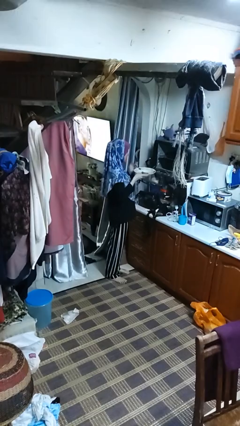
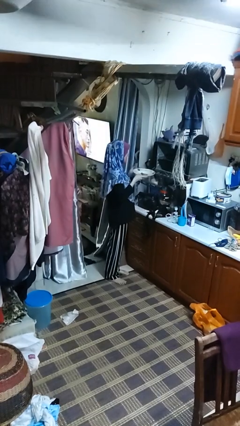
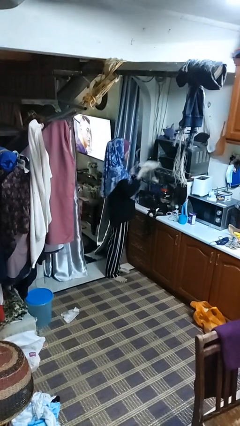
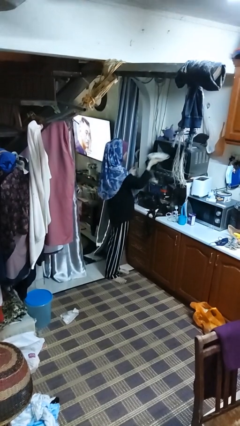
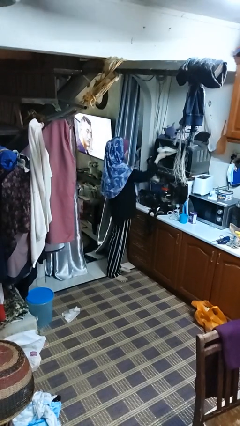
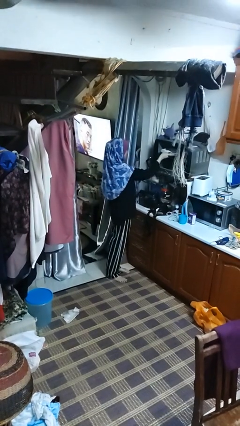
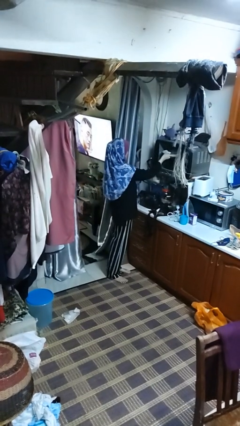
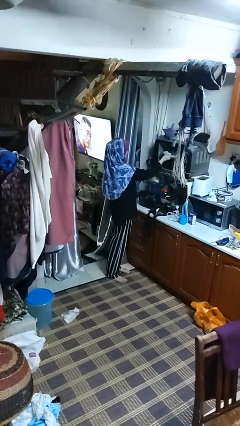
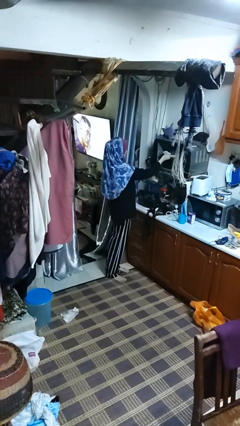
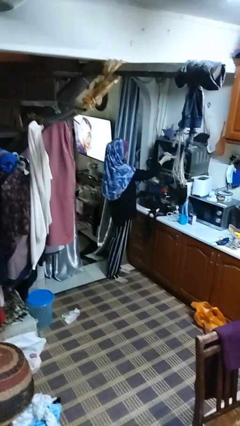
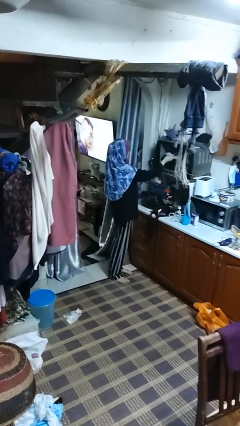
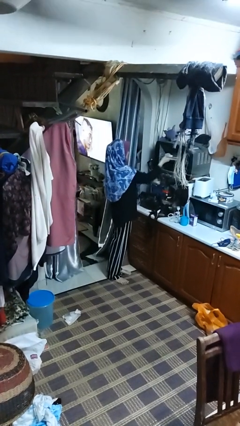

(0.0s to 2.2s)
person puts object into oven

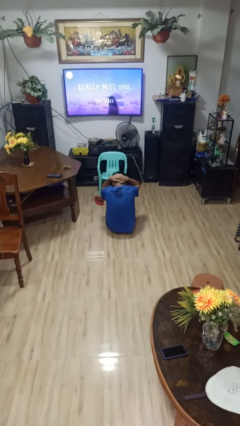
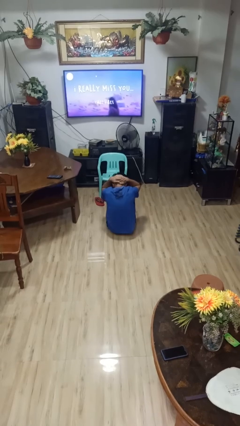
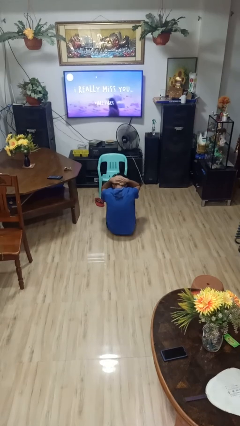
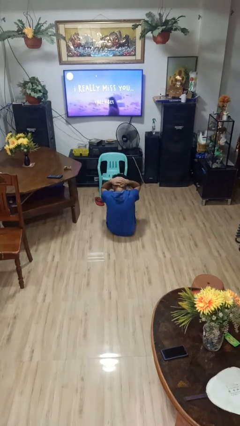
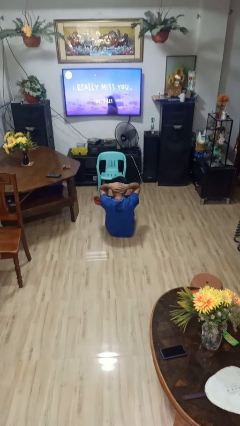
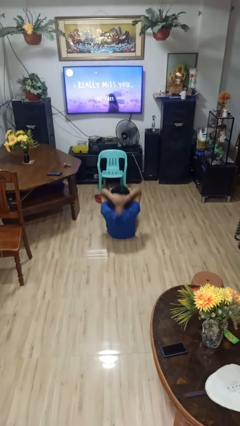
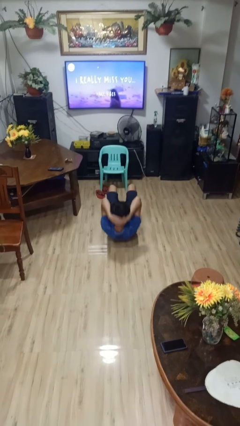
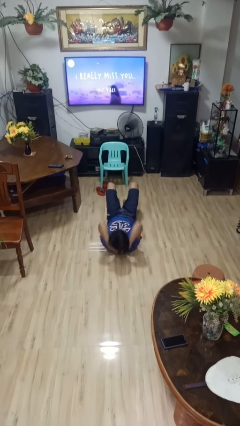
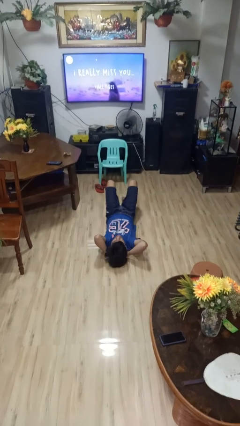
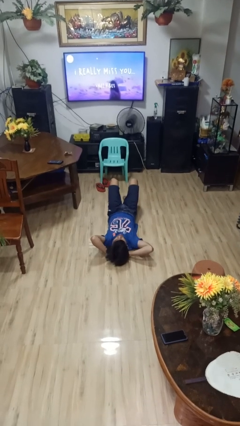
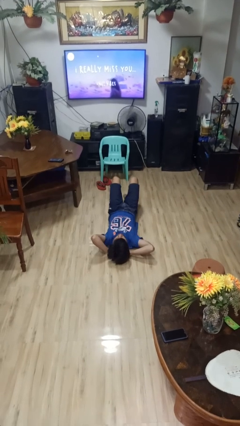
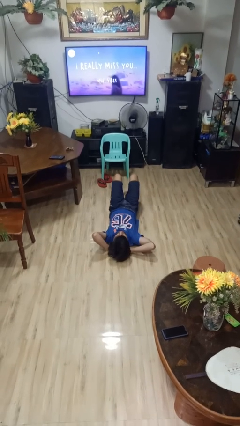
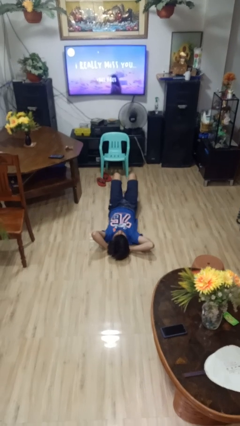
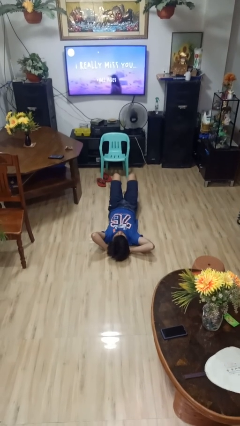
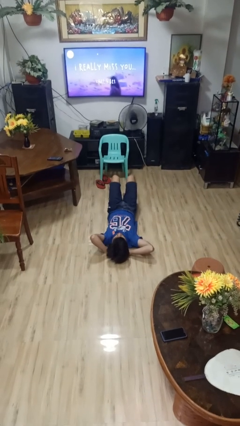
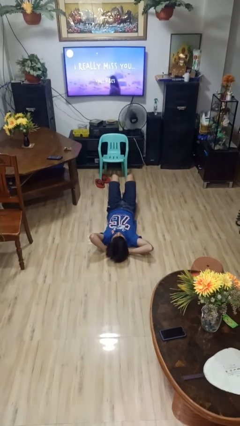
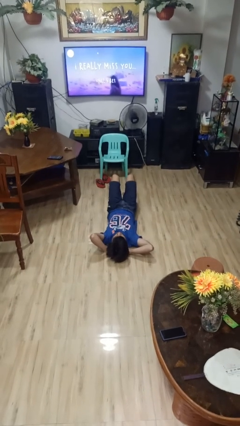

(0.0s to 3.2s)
person drinks from bottle

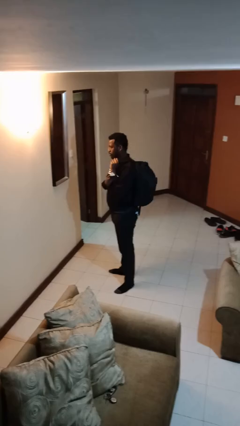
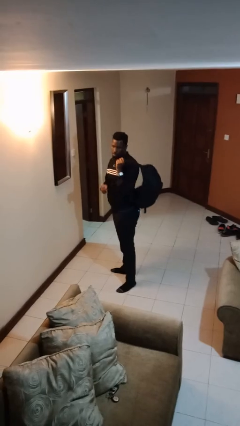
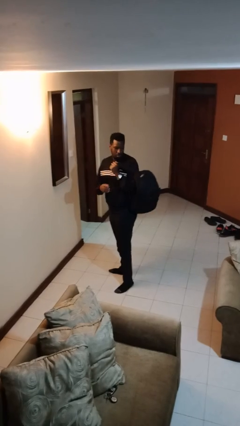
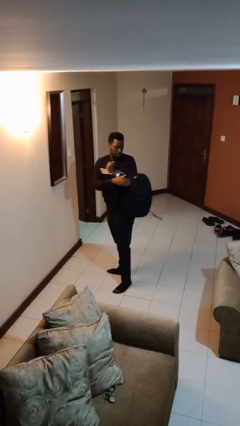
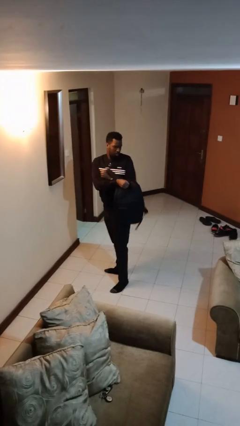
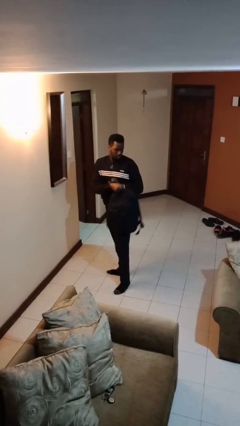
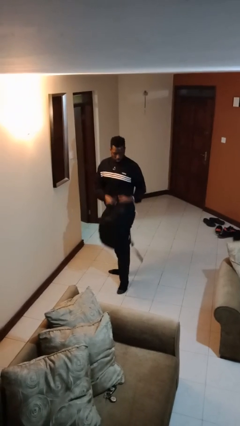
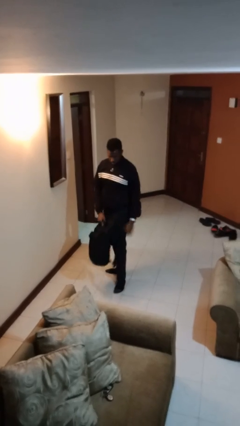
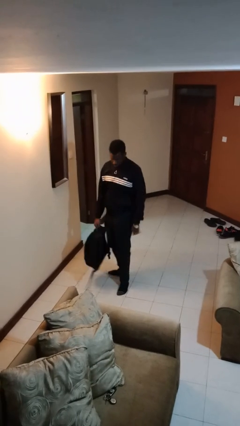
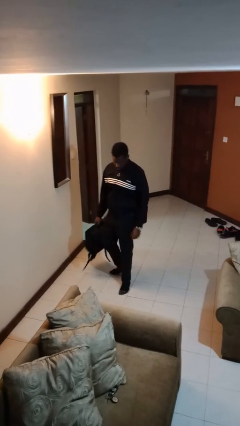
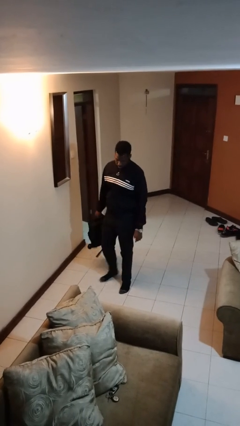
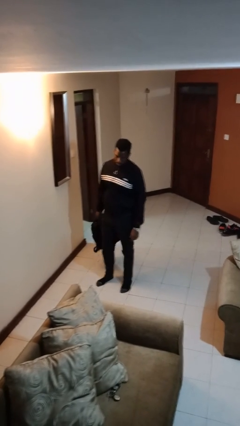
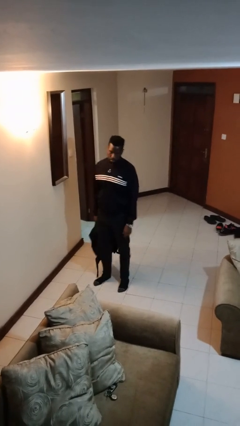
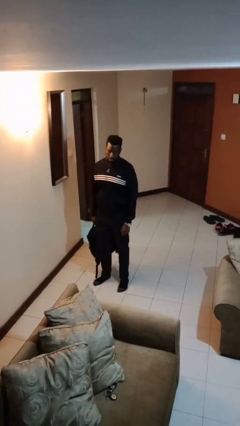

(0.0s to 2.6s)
person takes off backpack

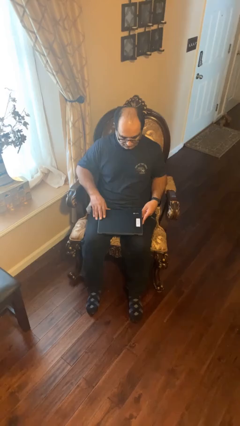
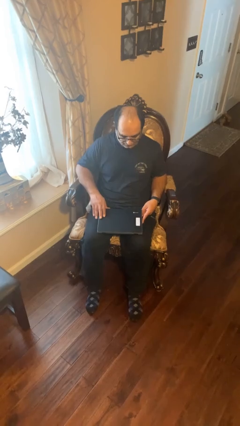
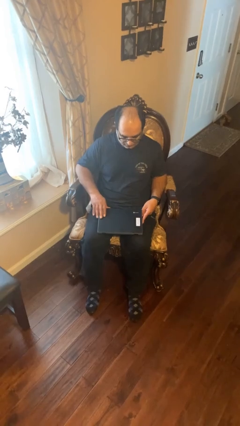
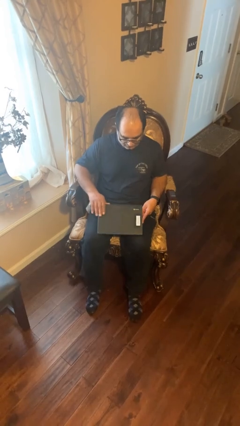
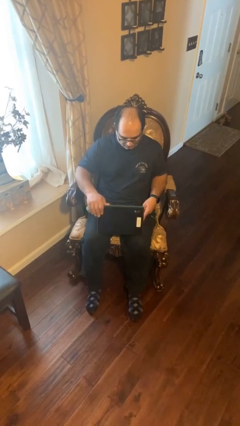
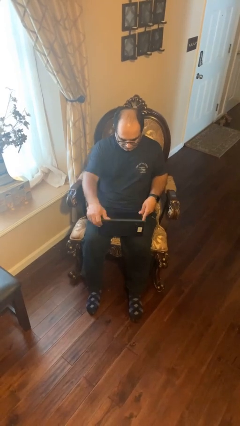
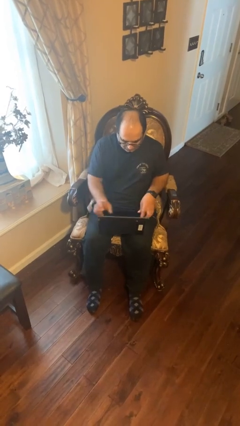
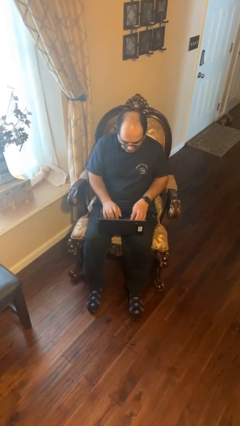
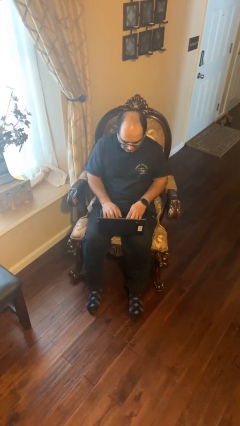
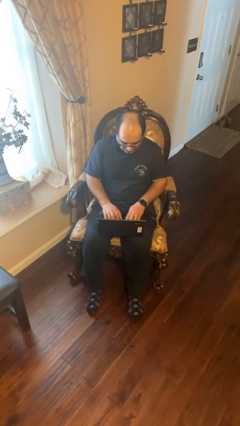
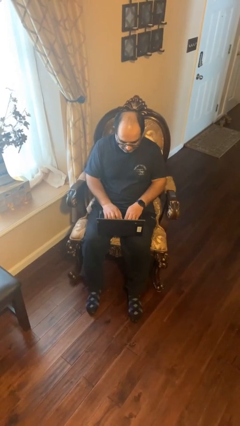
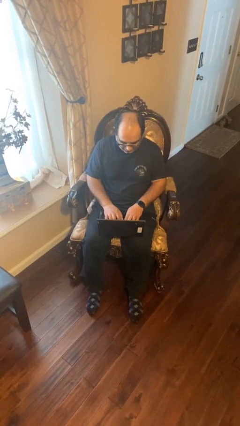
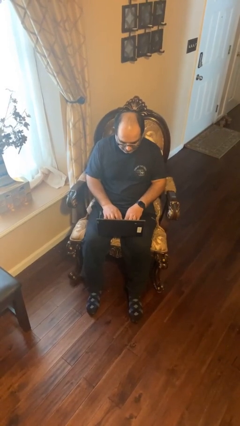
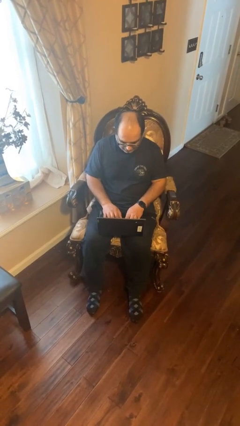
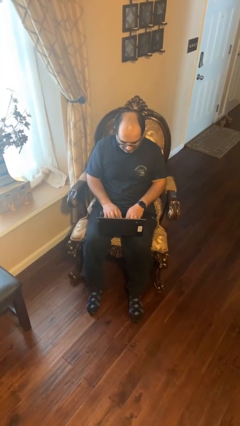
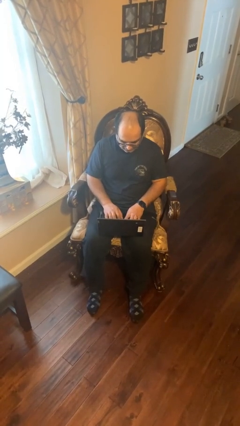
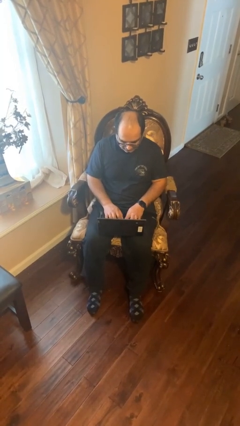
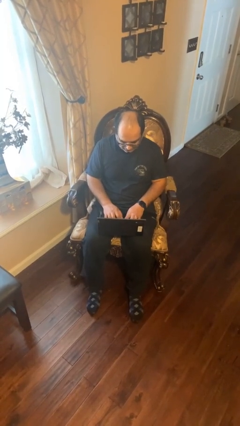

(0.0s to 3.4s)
person interacts with laptop

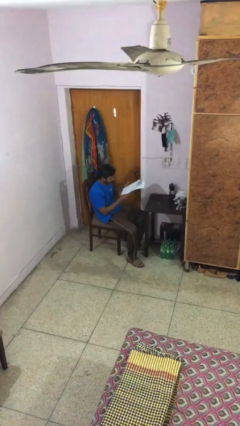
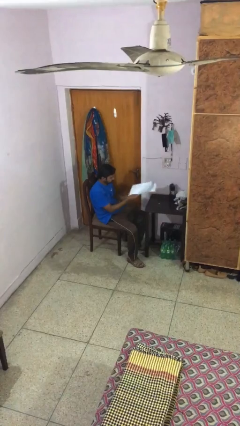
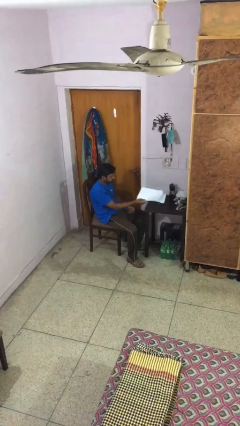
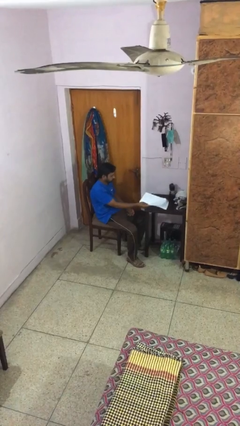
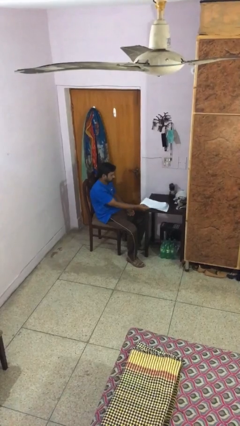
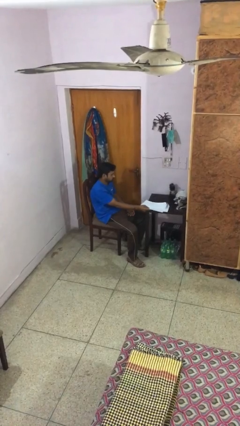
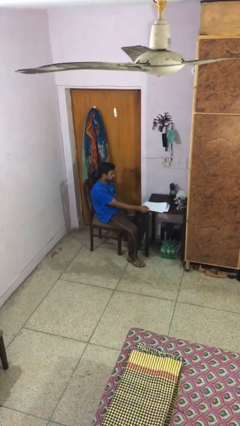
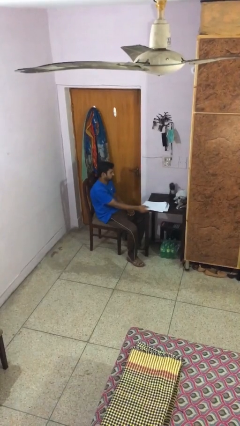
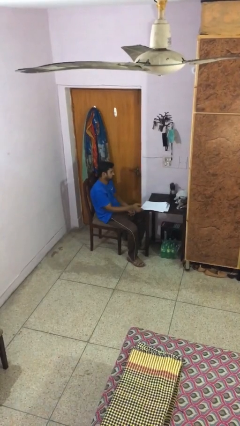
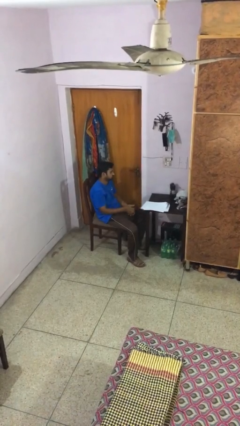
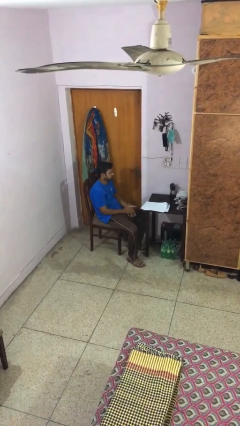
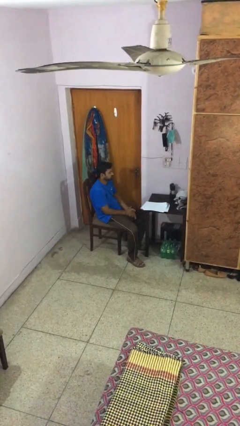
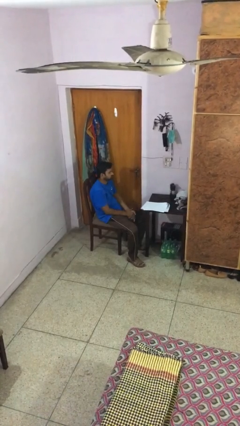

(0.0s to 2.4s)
person puts down object on table

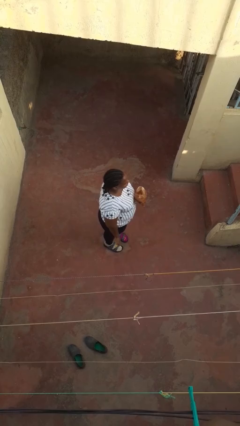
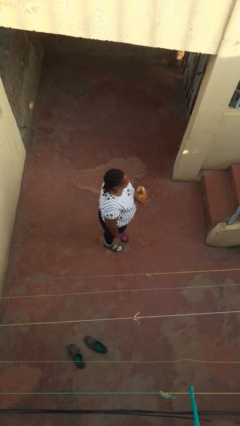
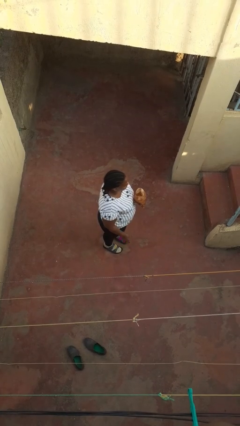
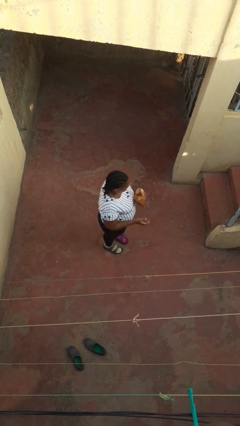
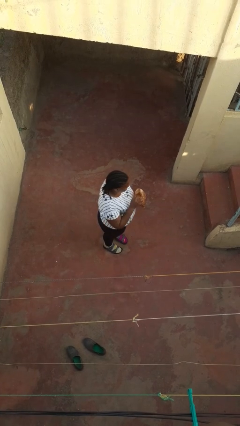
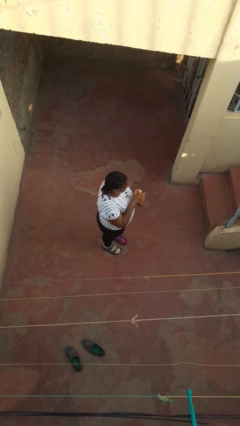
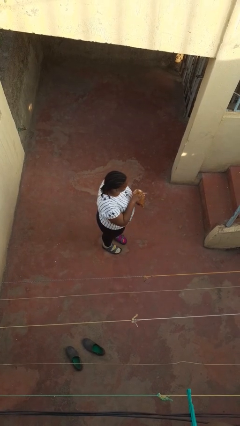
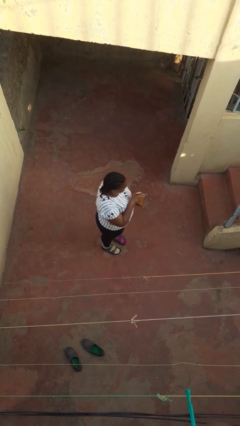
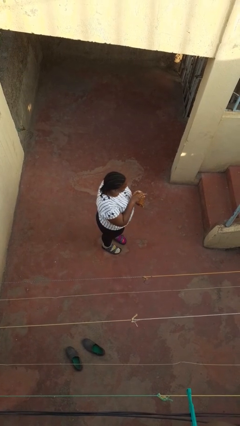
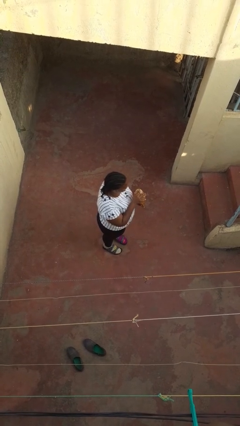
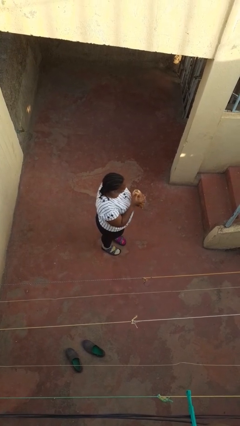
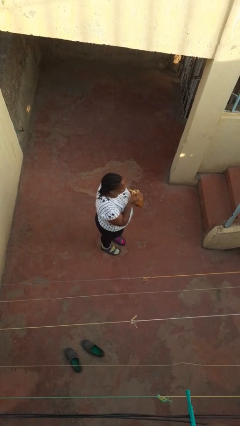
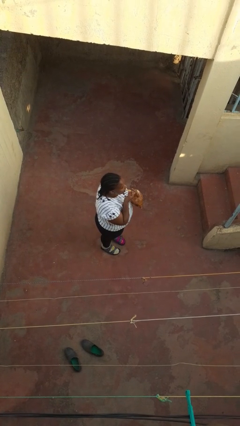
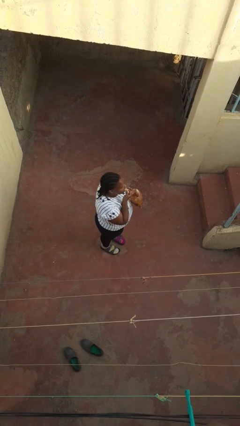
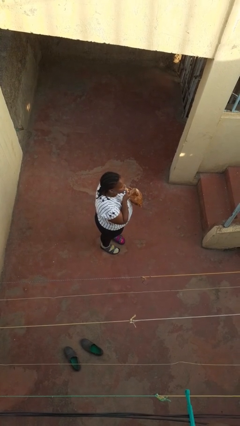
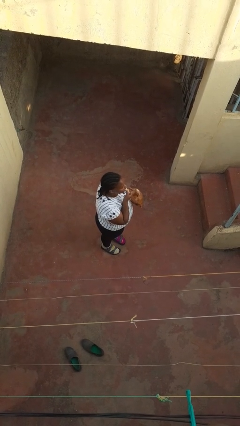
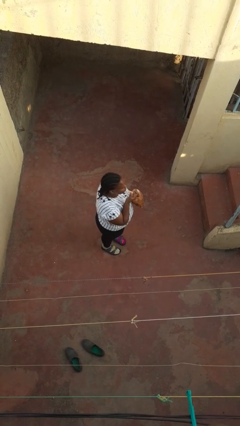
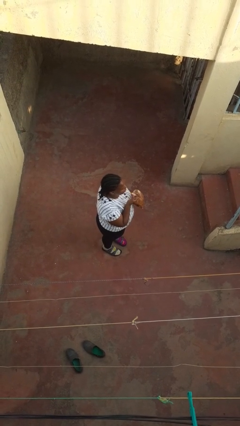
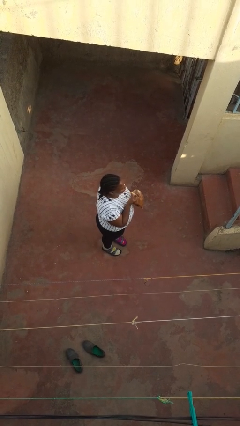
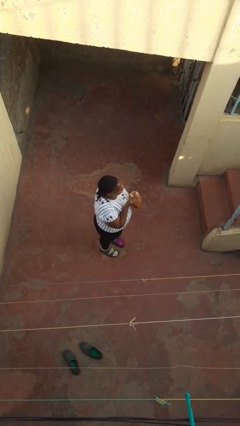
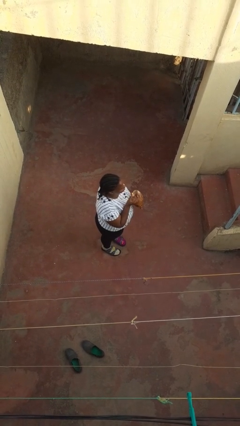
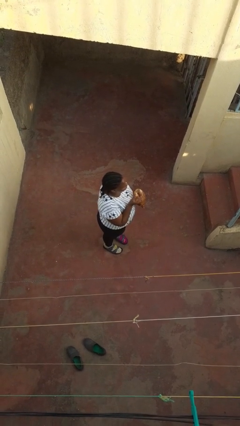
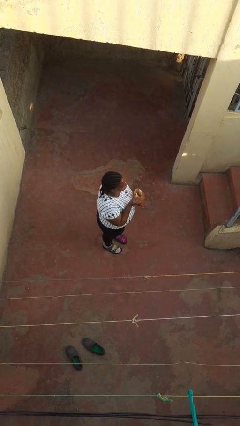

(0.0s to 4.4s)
person eats snack from bag
